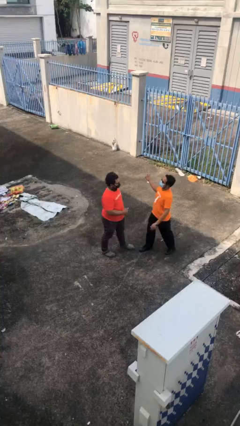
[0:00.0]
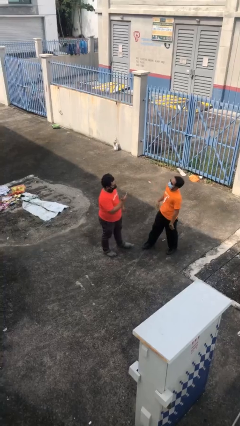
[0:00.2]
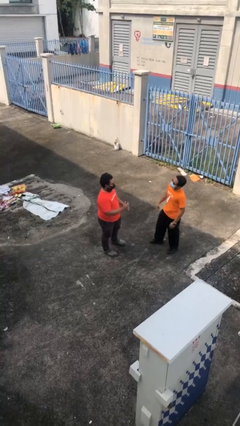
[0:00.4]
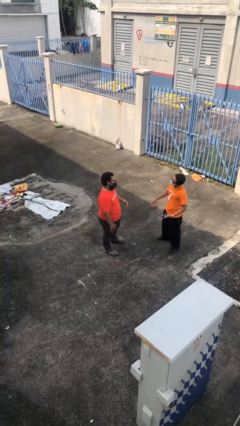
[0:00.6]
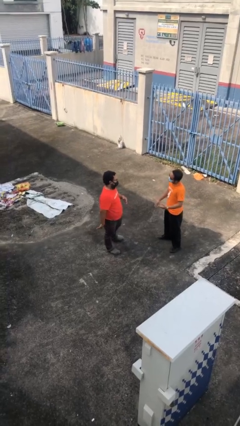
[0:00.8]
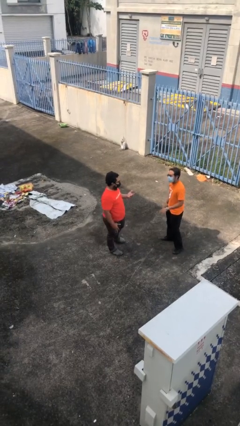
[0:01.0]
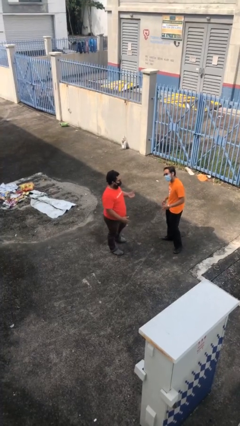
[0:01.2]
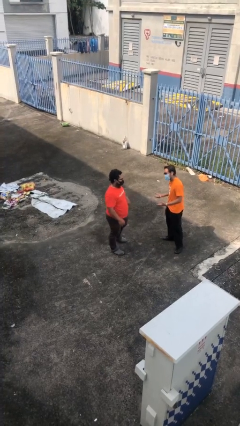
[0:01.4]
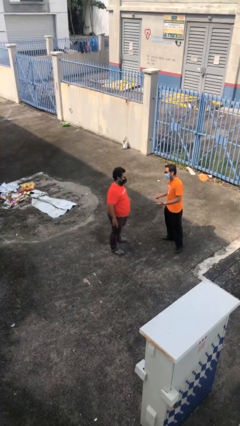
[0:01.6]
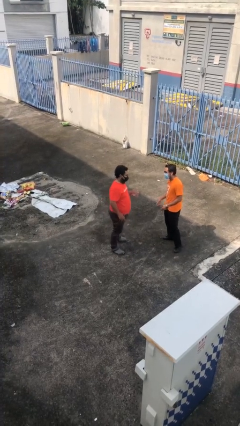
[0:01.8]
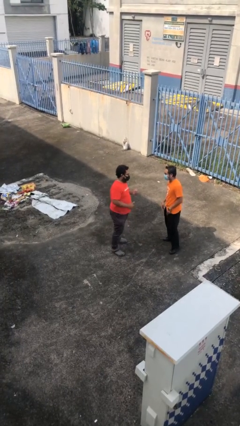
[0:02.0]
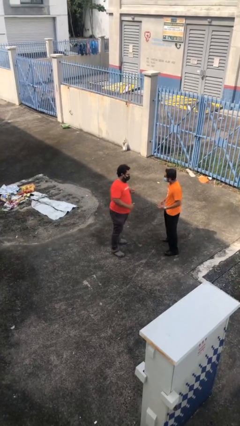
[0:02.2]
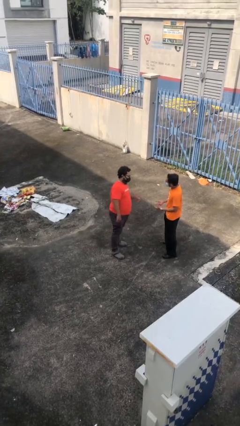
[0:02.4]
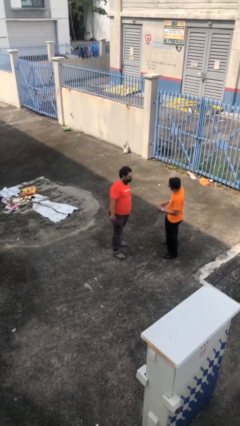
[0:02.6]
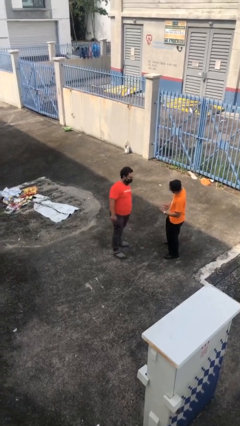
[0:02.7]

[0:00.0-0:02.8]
person talks to person

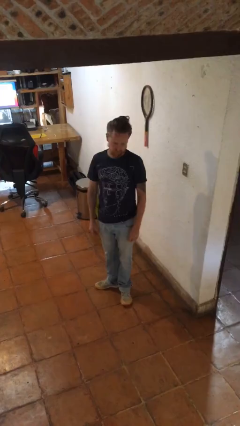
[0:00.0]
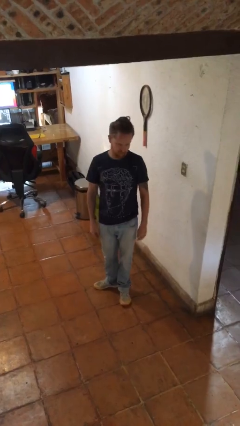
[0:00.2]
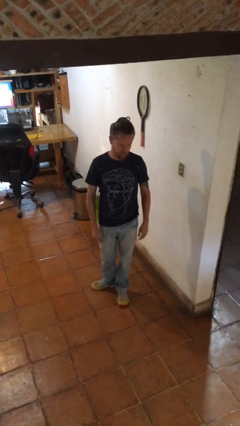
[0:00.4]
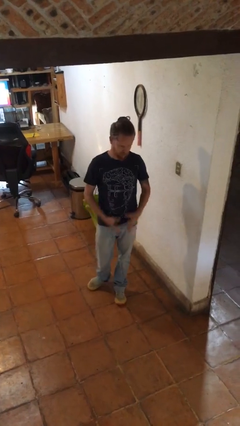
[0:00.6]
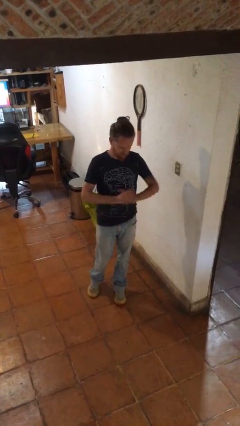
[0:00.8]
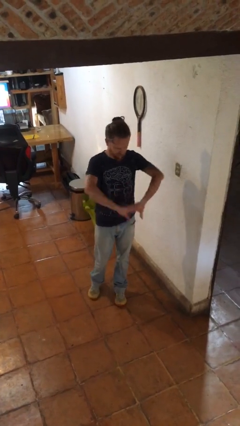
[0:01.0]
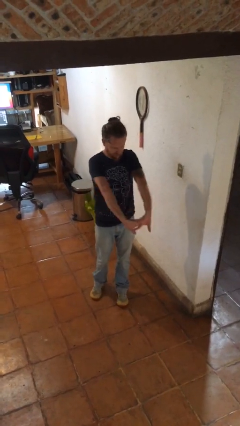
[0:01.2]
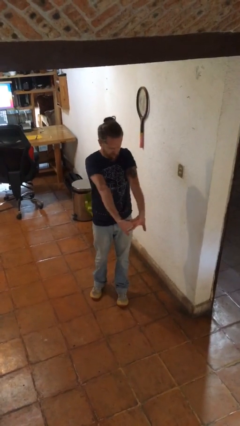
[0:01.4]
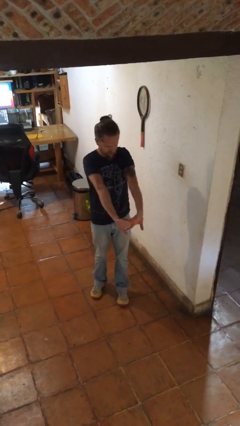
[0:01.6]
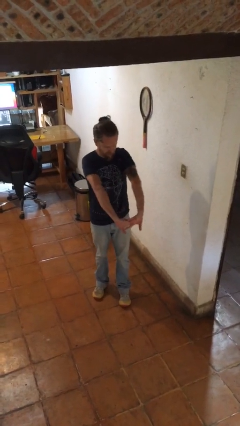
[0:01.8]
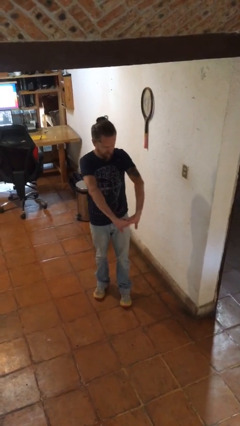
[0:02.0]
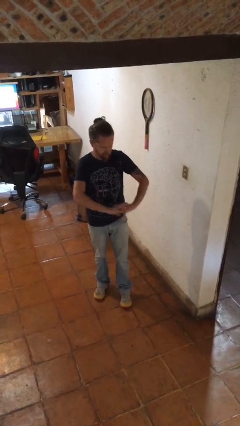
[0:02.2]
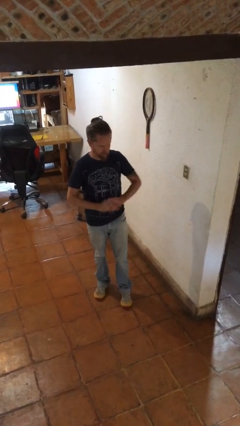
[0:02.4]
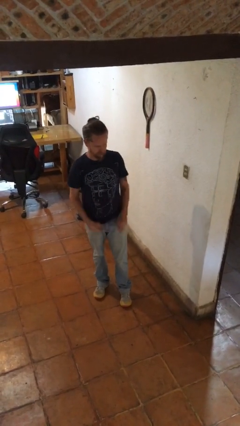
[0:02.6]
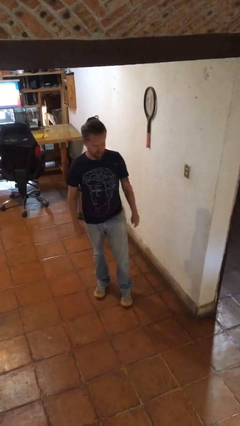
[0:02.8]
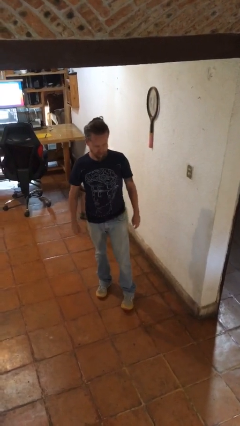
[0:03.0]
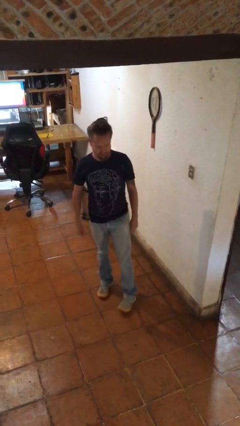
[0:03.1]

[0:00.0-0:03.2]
person cracks knuckles

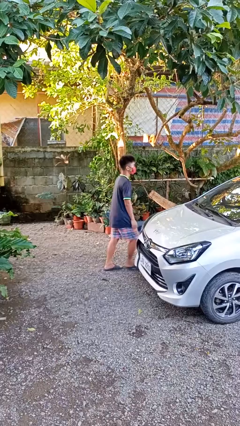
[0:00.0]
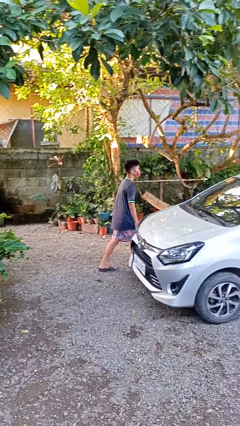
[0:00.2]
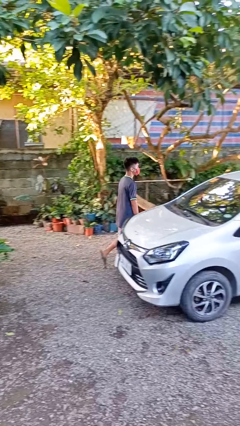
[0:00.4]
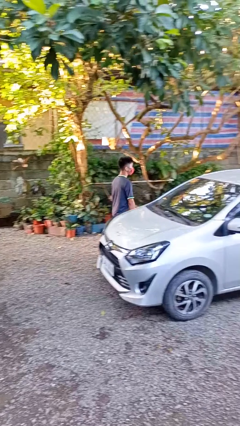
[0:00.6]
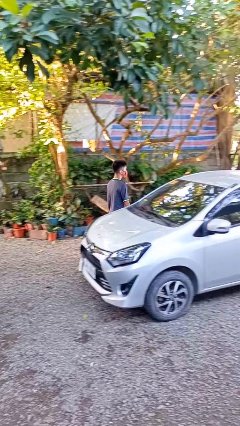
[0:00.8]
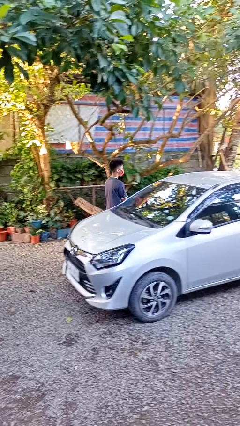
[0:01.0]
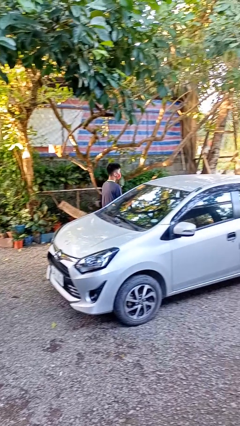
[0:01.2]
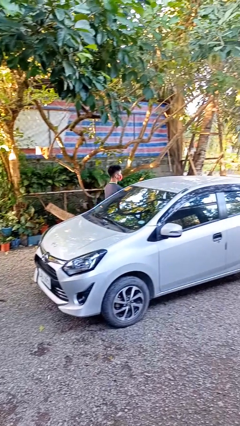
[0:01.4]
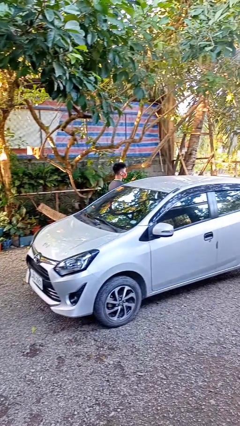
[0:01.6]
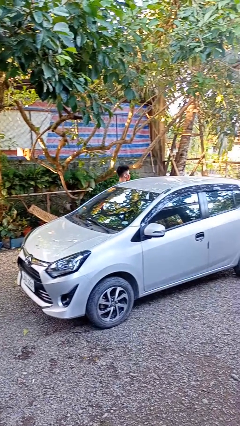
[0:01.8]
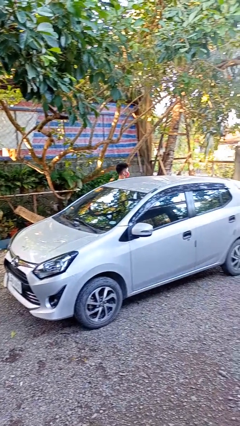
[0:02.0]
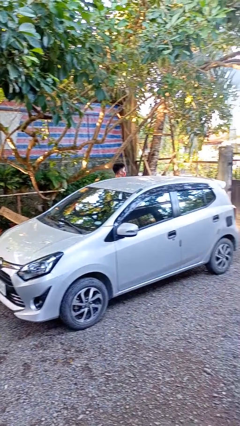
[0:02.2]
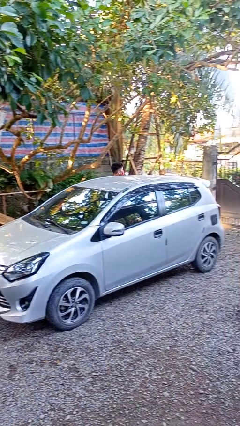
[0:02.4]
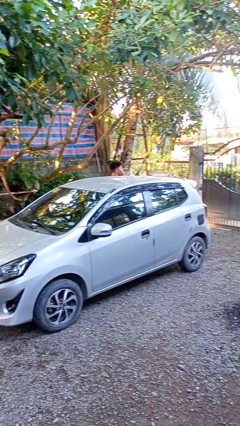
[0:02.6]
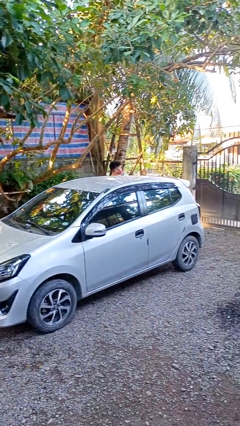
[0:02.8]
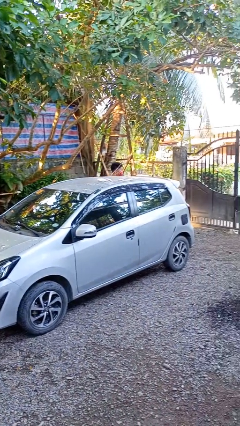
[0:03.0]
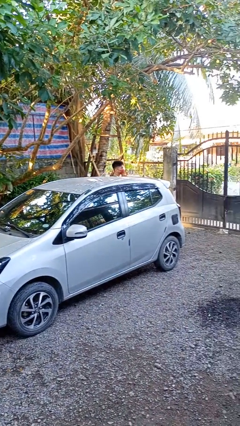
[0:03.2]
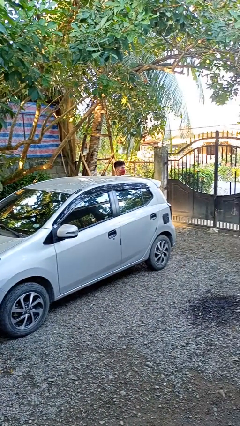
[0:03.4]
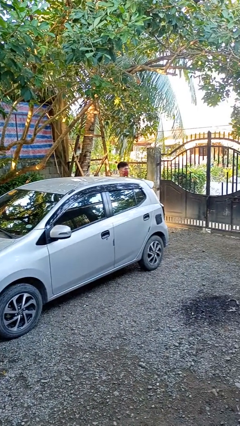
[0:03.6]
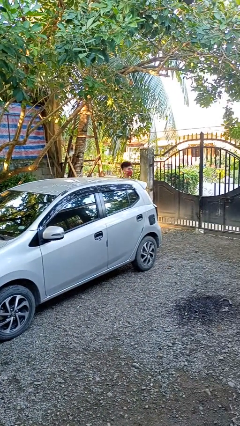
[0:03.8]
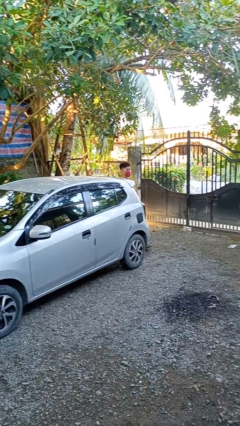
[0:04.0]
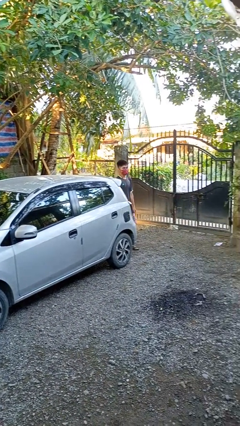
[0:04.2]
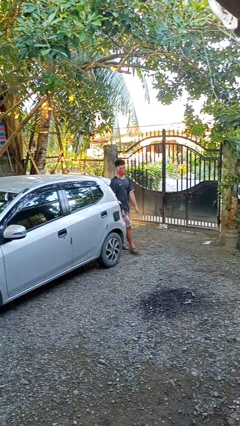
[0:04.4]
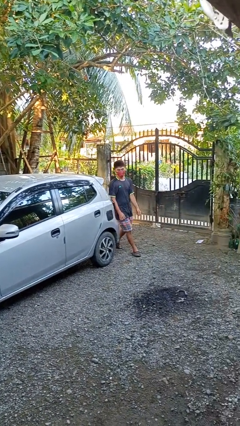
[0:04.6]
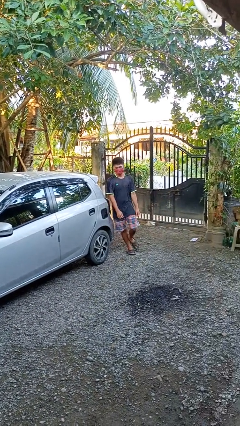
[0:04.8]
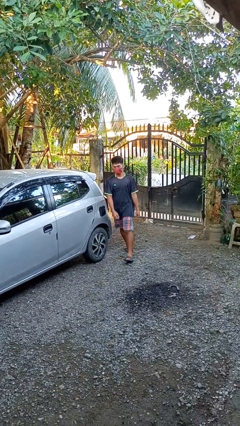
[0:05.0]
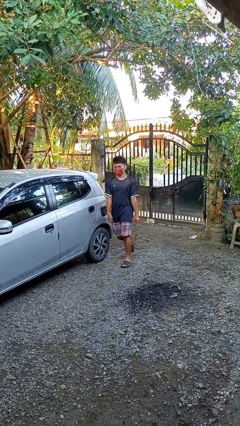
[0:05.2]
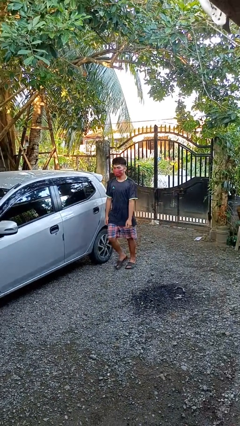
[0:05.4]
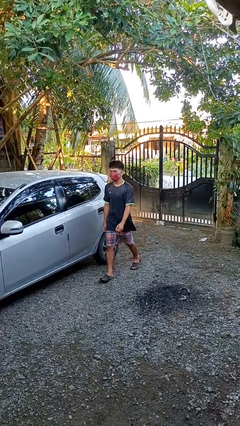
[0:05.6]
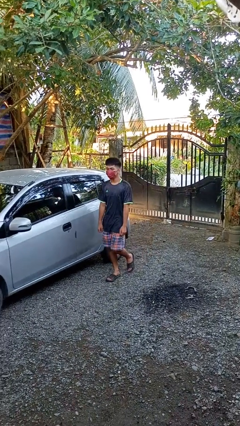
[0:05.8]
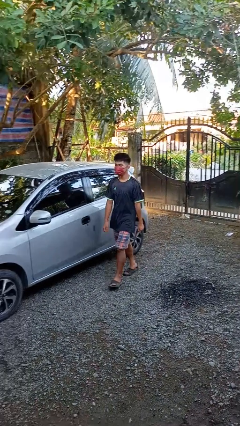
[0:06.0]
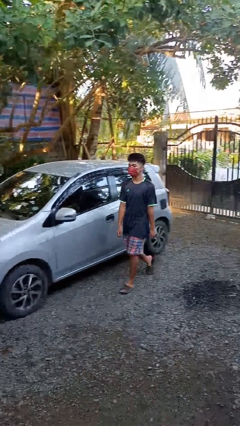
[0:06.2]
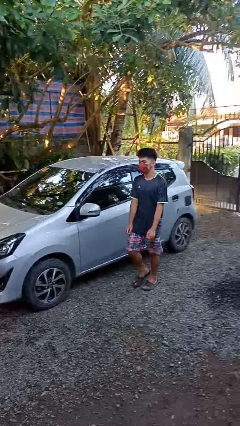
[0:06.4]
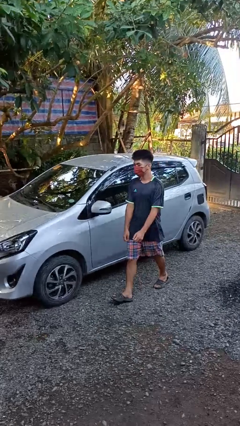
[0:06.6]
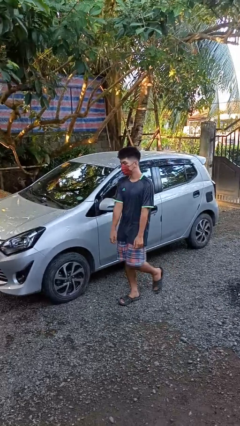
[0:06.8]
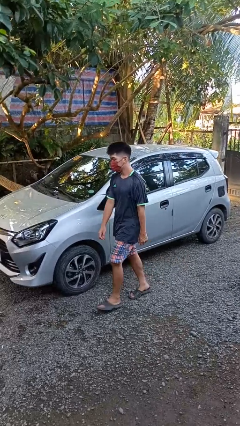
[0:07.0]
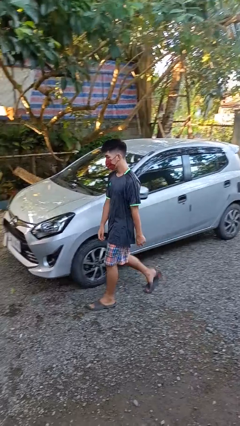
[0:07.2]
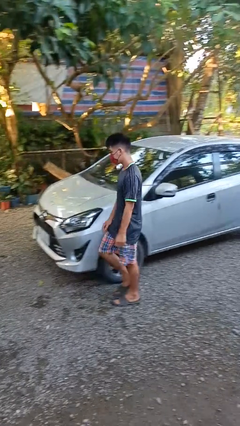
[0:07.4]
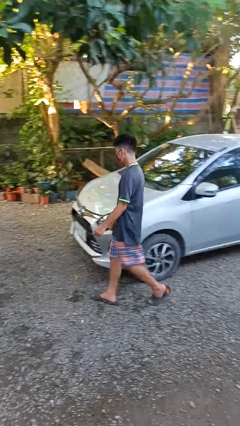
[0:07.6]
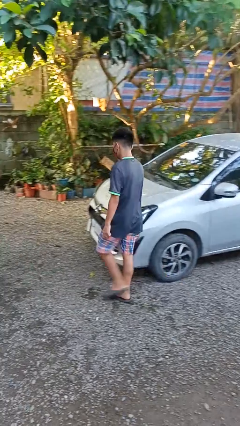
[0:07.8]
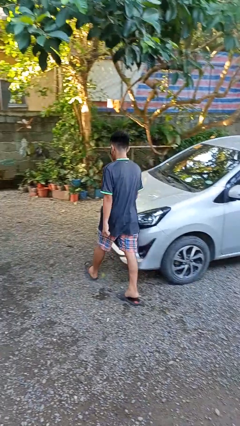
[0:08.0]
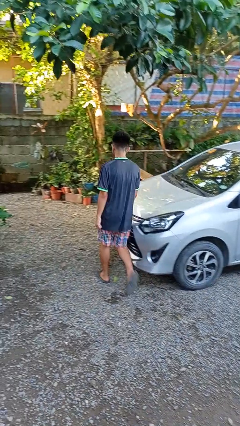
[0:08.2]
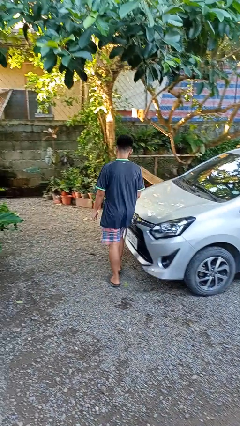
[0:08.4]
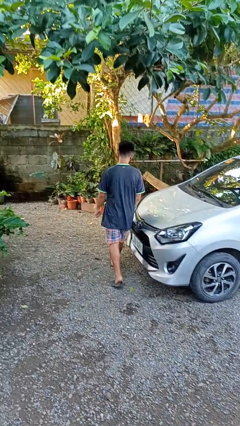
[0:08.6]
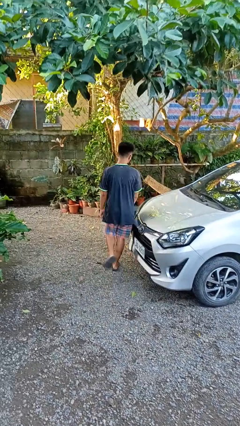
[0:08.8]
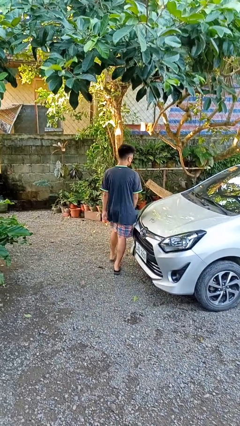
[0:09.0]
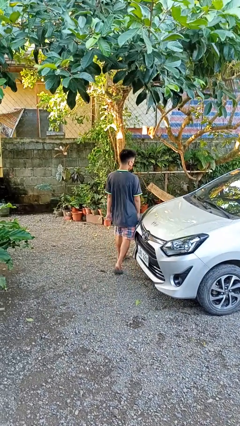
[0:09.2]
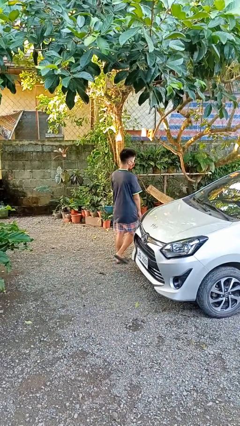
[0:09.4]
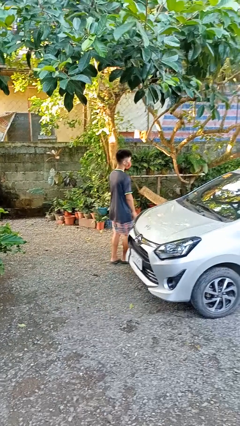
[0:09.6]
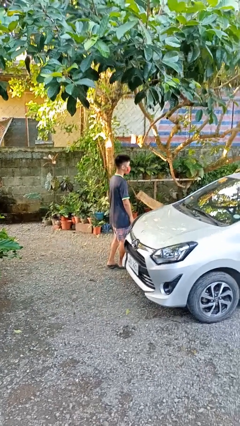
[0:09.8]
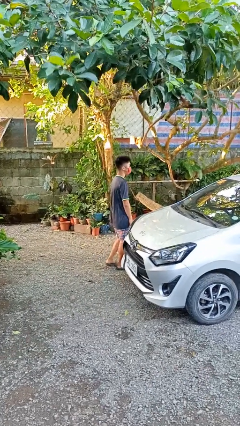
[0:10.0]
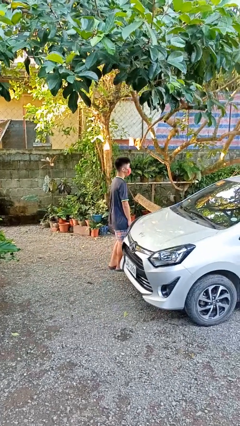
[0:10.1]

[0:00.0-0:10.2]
person walks around car

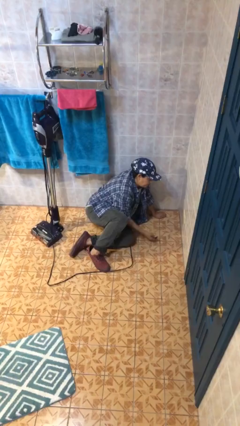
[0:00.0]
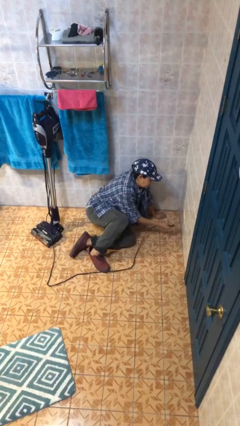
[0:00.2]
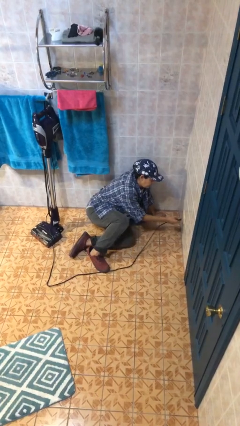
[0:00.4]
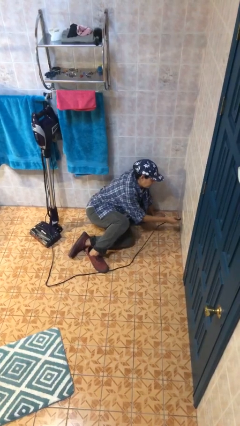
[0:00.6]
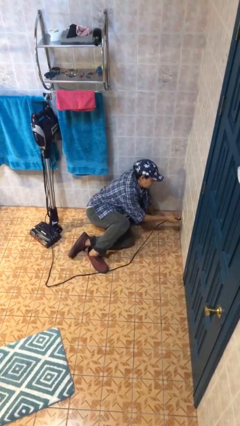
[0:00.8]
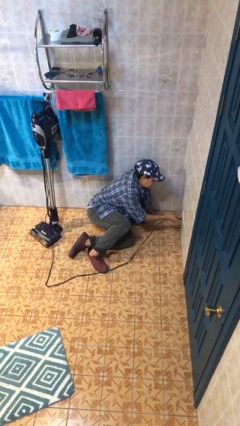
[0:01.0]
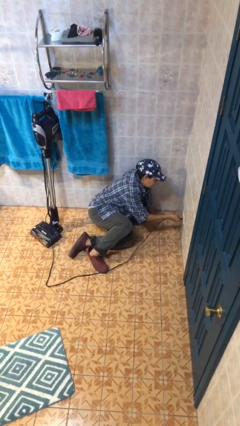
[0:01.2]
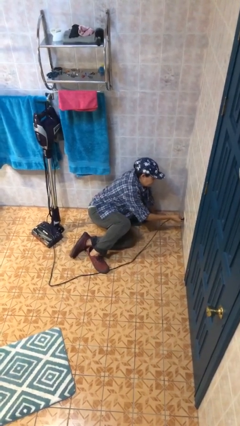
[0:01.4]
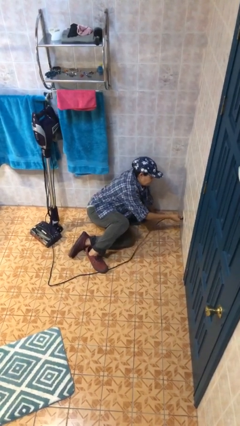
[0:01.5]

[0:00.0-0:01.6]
person plugs into electrical socket
